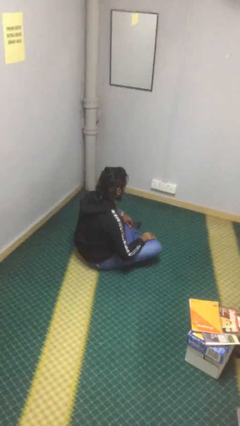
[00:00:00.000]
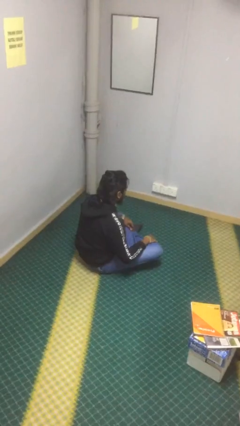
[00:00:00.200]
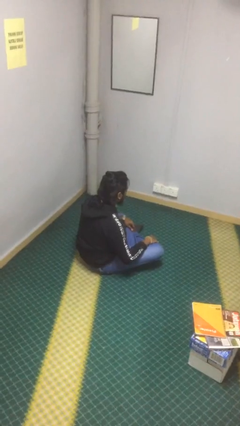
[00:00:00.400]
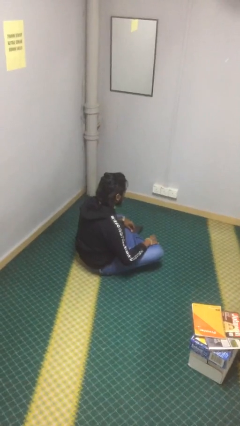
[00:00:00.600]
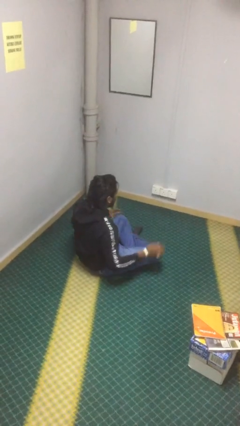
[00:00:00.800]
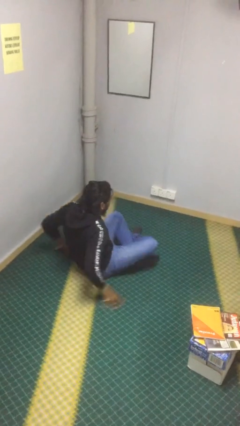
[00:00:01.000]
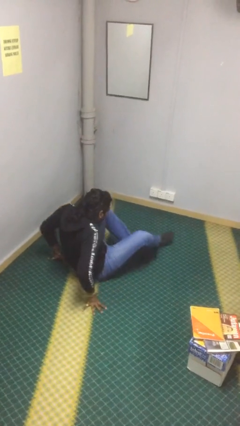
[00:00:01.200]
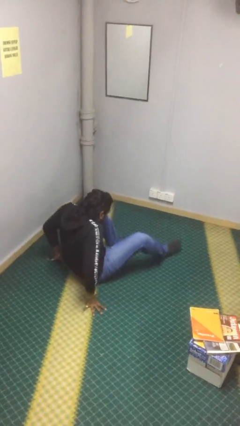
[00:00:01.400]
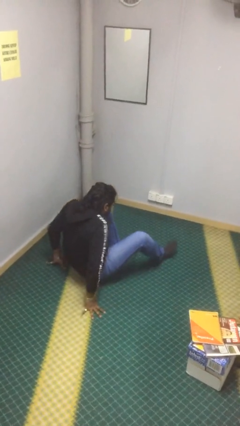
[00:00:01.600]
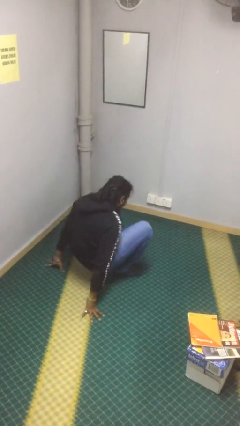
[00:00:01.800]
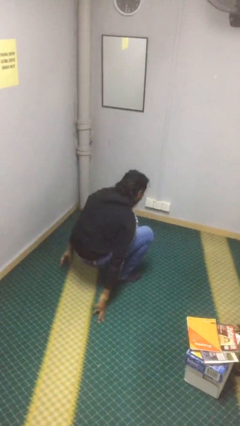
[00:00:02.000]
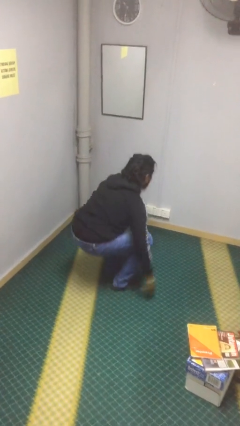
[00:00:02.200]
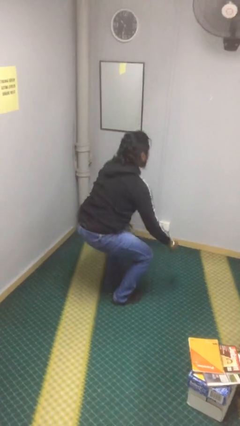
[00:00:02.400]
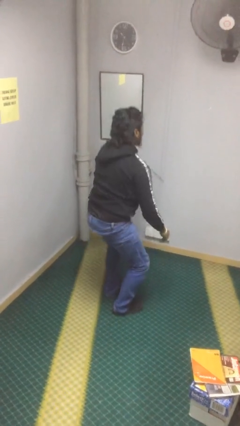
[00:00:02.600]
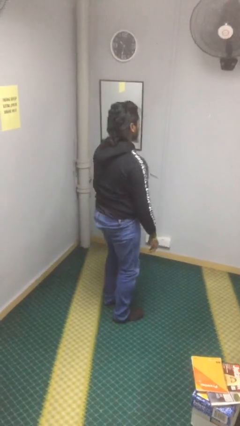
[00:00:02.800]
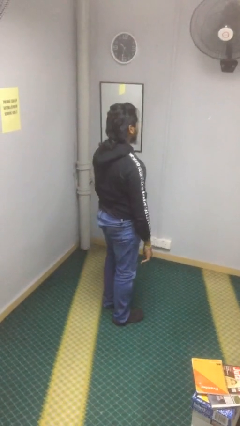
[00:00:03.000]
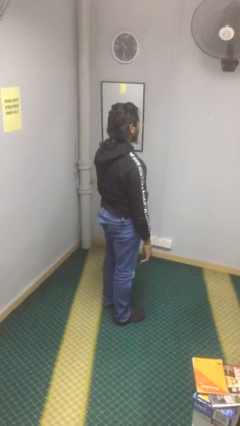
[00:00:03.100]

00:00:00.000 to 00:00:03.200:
person stands up from floor

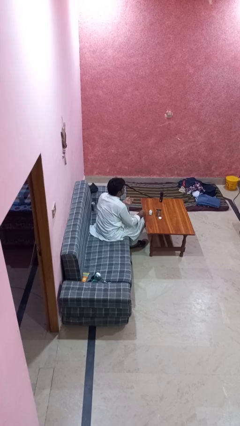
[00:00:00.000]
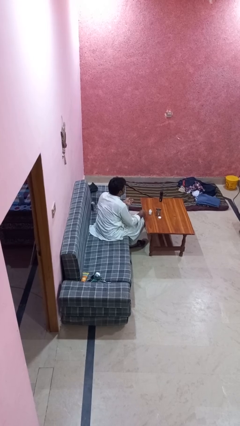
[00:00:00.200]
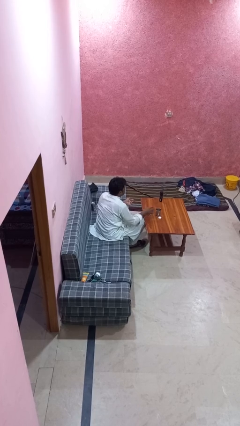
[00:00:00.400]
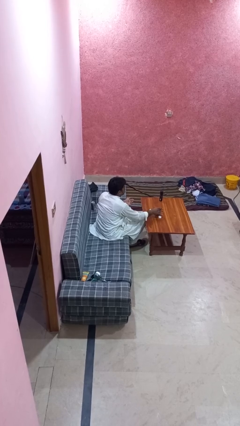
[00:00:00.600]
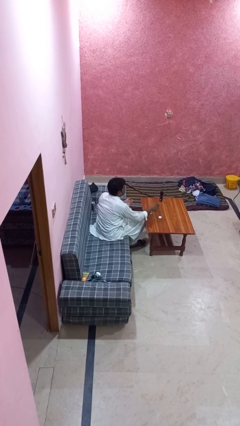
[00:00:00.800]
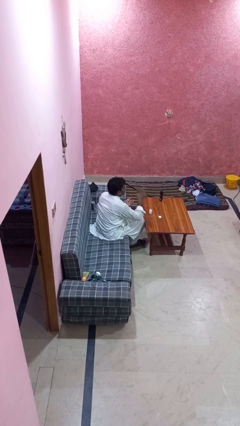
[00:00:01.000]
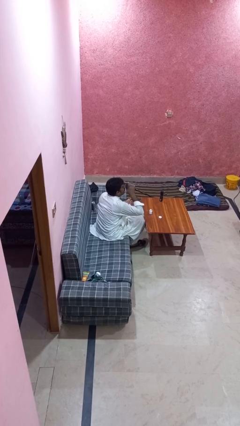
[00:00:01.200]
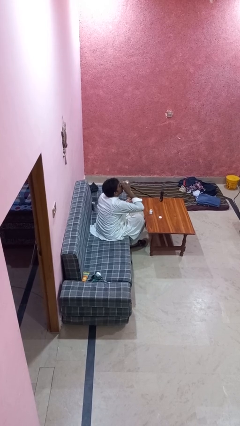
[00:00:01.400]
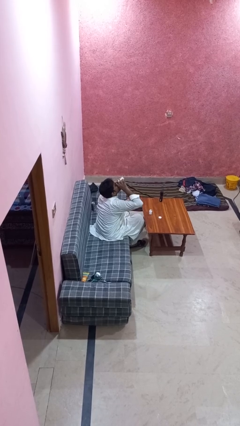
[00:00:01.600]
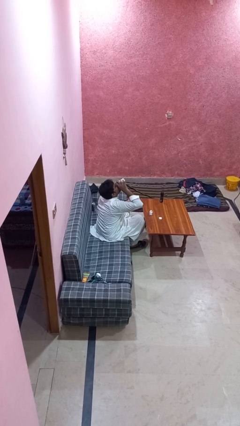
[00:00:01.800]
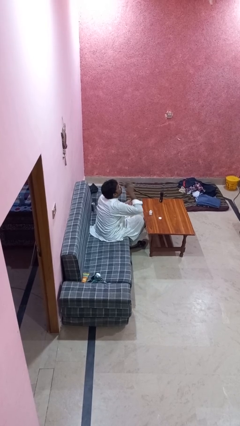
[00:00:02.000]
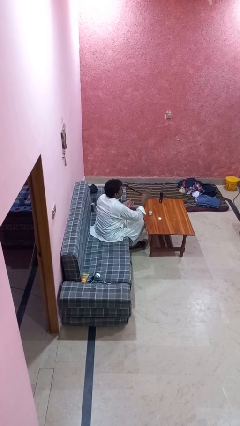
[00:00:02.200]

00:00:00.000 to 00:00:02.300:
person drinks from cup

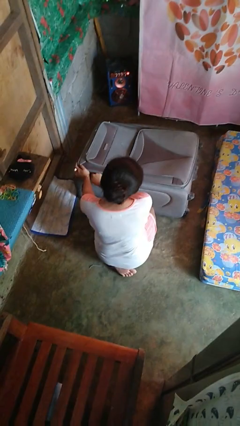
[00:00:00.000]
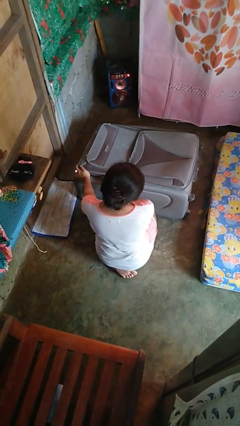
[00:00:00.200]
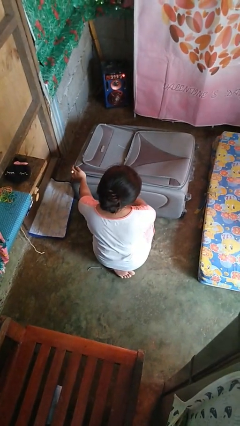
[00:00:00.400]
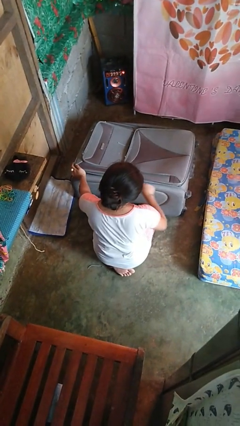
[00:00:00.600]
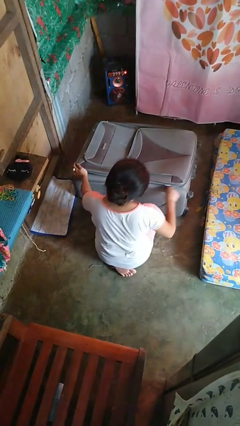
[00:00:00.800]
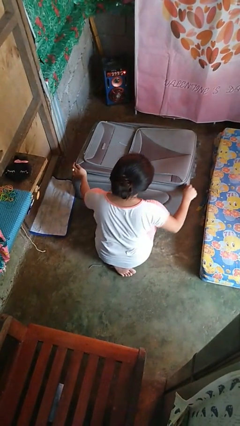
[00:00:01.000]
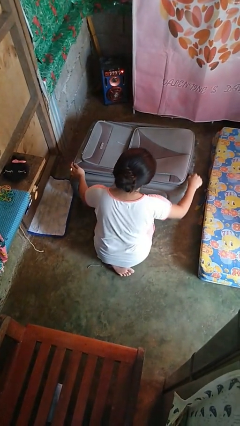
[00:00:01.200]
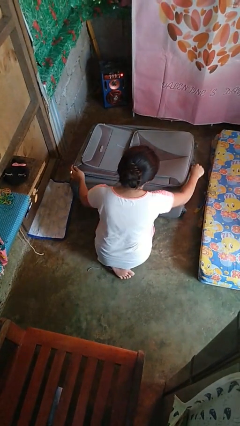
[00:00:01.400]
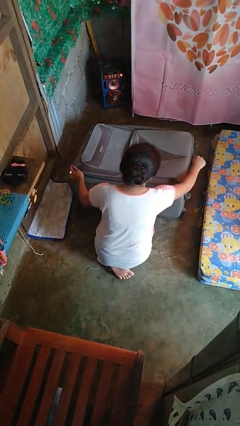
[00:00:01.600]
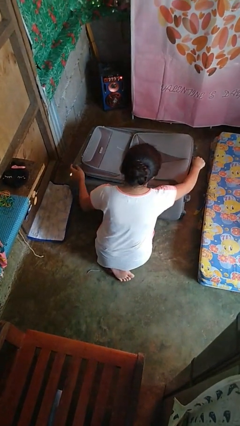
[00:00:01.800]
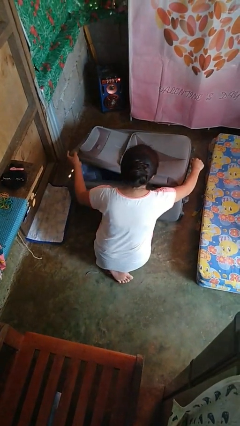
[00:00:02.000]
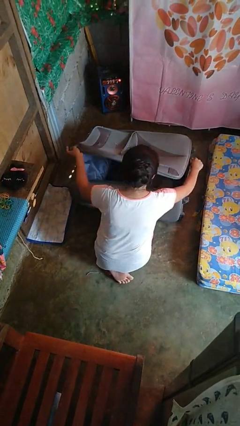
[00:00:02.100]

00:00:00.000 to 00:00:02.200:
person opens suitcase

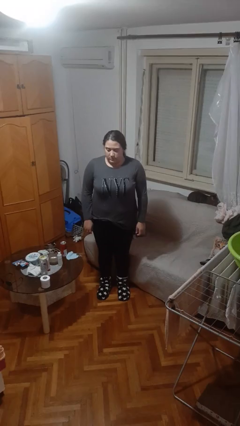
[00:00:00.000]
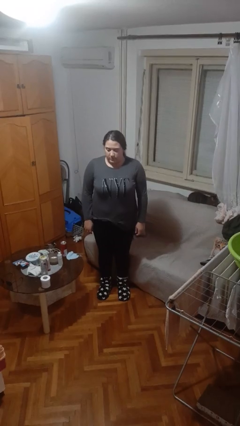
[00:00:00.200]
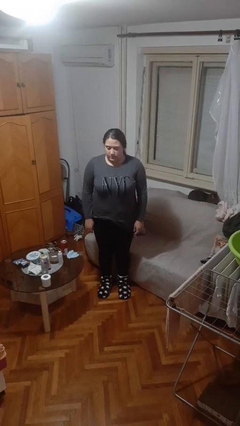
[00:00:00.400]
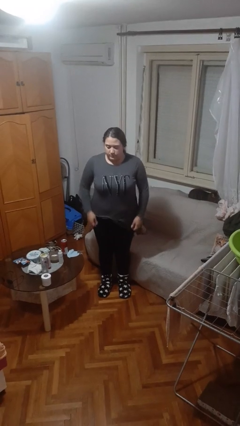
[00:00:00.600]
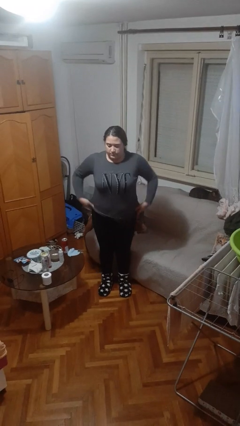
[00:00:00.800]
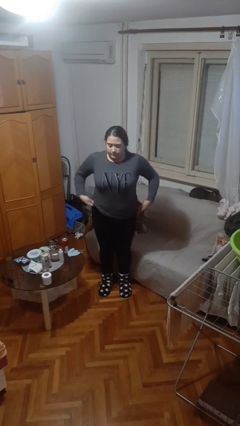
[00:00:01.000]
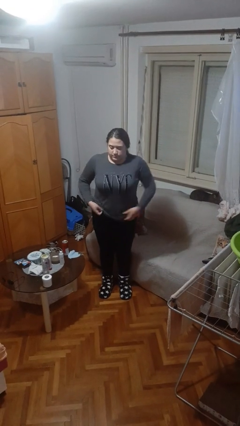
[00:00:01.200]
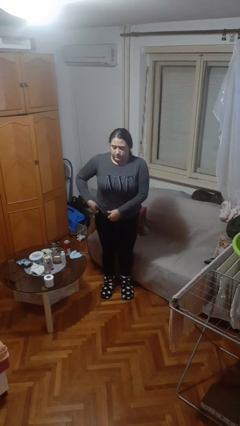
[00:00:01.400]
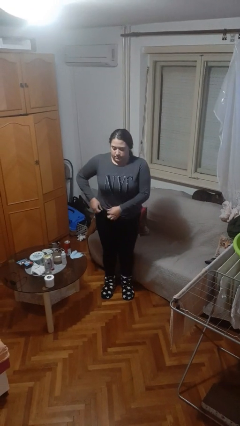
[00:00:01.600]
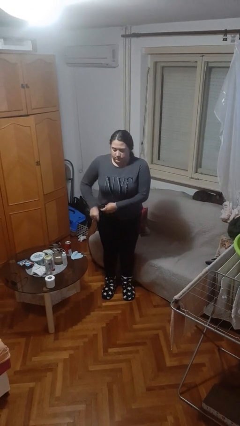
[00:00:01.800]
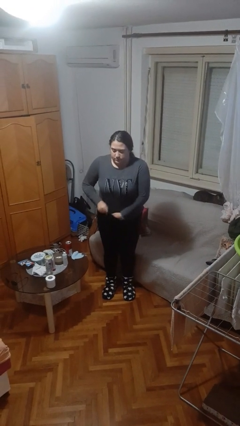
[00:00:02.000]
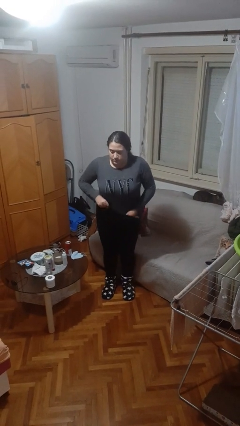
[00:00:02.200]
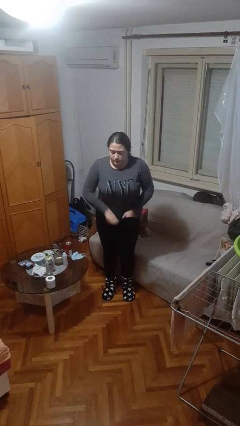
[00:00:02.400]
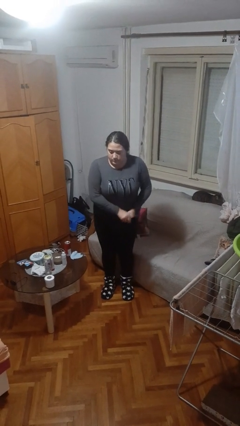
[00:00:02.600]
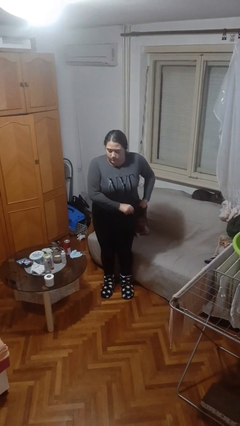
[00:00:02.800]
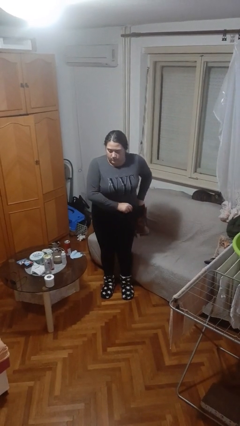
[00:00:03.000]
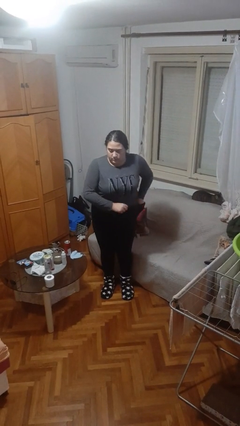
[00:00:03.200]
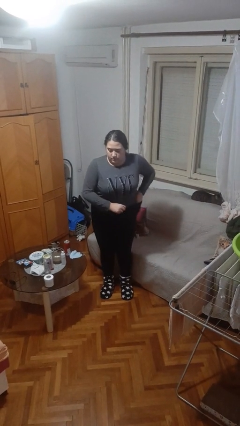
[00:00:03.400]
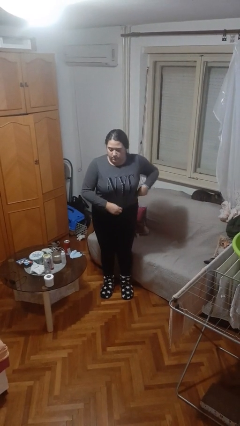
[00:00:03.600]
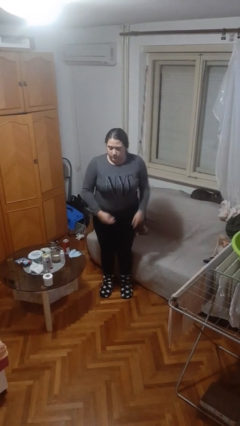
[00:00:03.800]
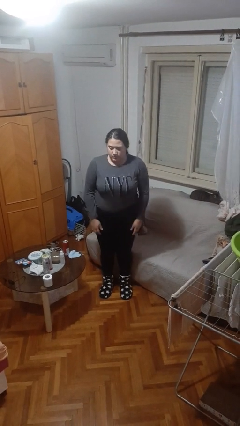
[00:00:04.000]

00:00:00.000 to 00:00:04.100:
person tucks in shirt

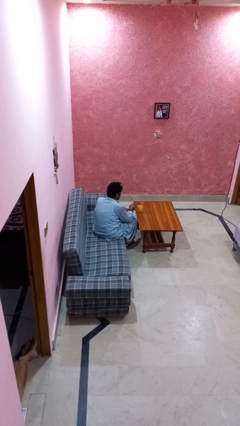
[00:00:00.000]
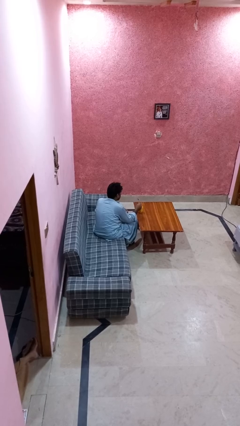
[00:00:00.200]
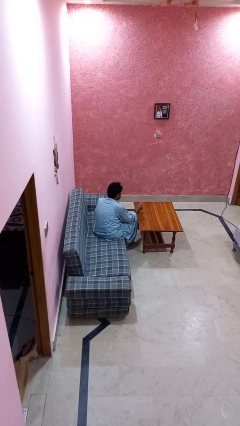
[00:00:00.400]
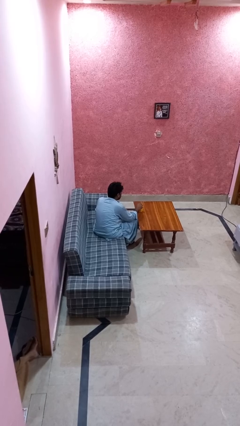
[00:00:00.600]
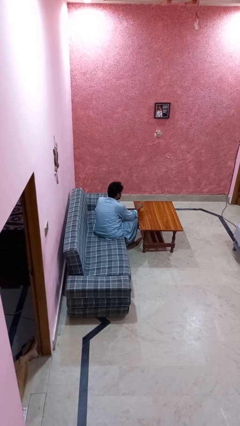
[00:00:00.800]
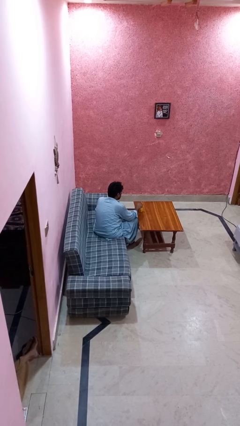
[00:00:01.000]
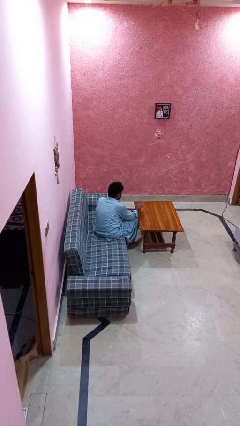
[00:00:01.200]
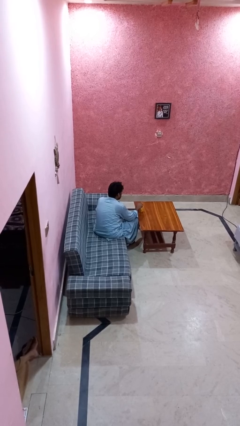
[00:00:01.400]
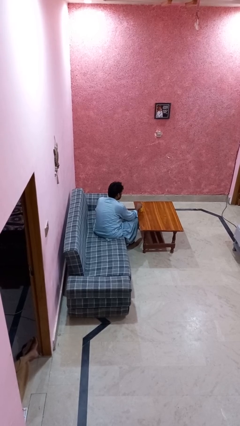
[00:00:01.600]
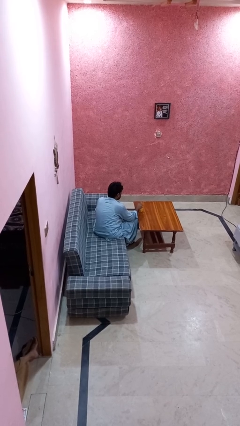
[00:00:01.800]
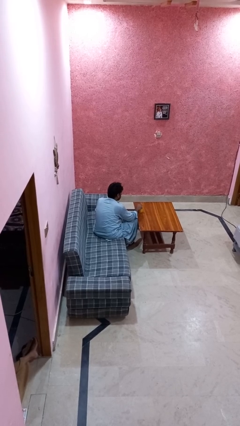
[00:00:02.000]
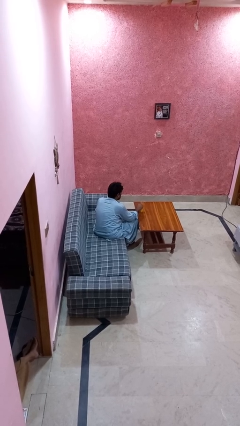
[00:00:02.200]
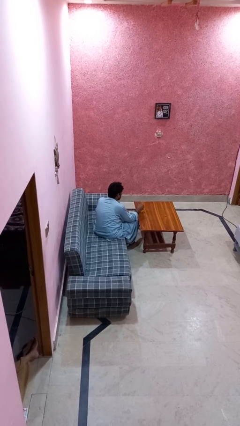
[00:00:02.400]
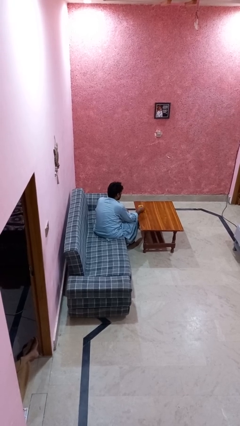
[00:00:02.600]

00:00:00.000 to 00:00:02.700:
person stirs mug

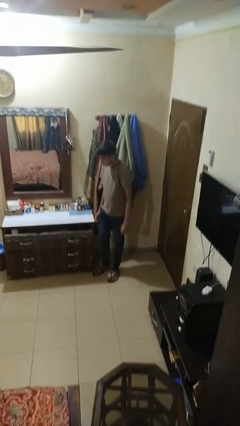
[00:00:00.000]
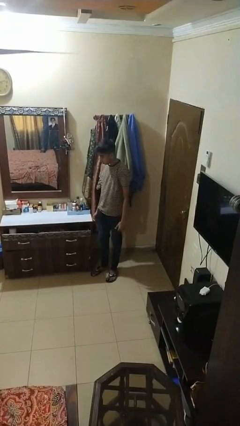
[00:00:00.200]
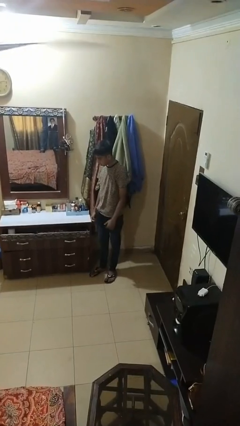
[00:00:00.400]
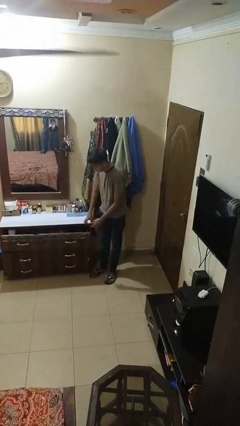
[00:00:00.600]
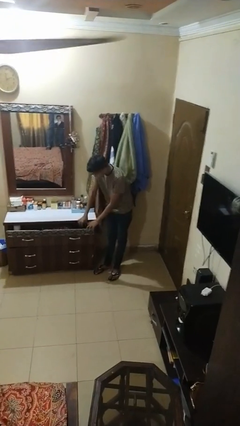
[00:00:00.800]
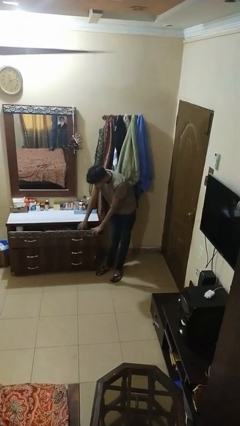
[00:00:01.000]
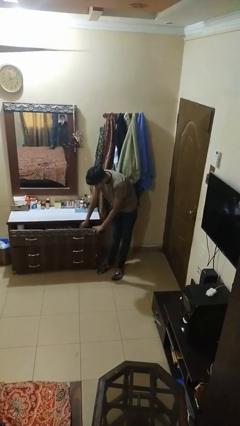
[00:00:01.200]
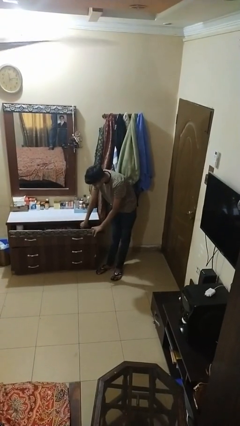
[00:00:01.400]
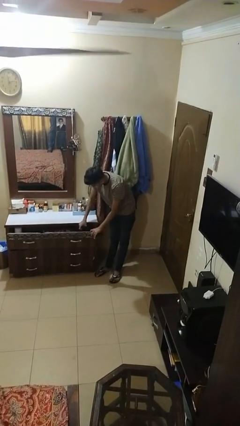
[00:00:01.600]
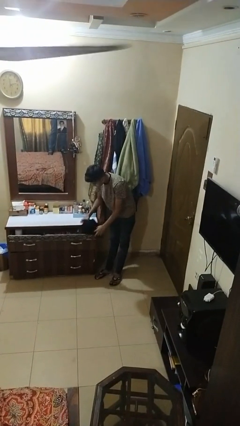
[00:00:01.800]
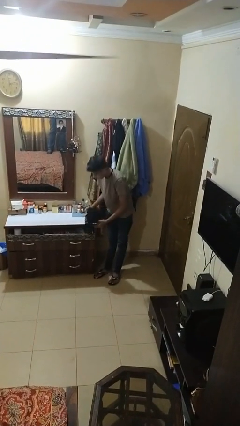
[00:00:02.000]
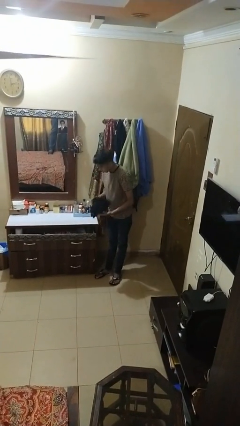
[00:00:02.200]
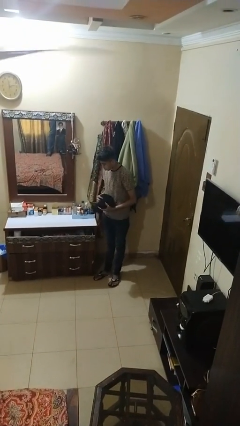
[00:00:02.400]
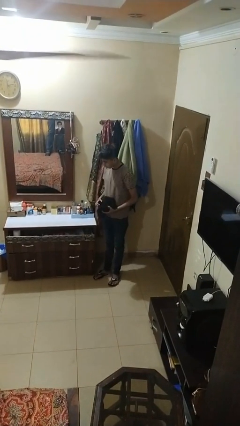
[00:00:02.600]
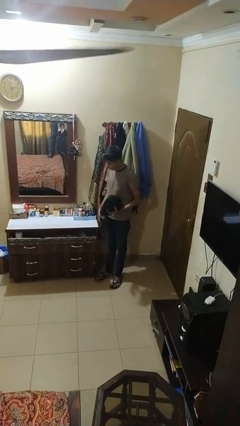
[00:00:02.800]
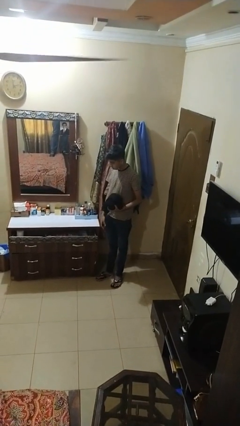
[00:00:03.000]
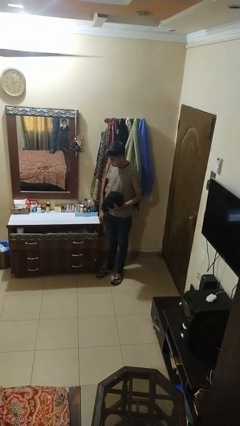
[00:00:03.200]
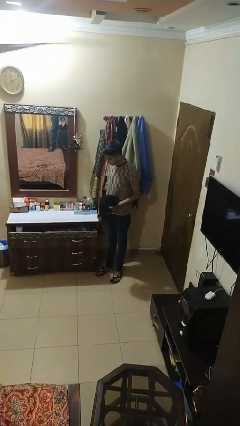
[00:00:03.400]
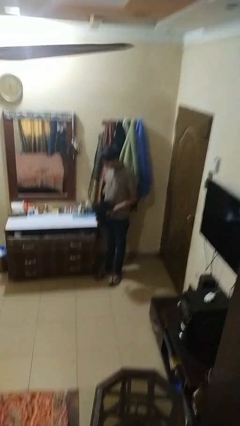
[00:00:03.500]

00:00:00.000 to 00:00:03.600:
person takes clothes from dresser
